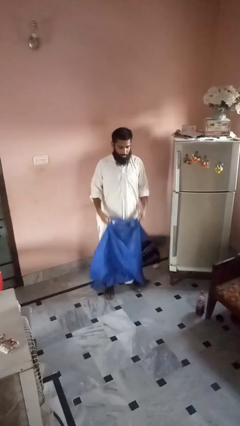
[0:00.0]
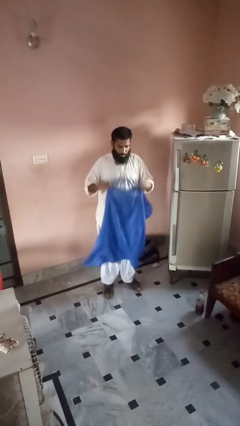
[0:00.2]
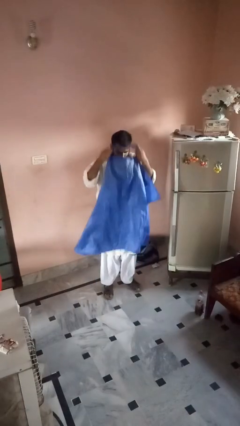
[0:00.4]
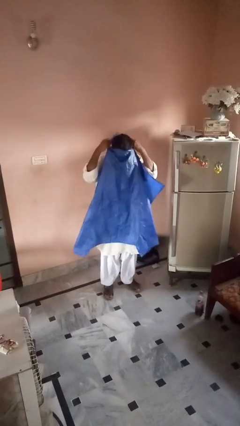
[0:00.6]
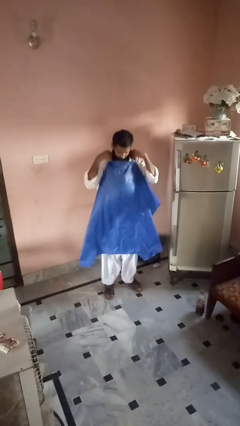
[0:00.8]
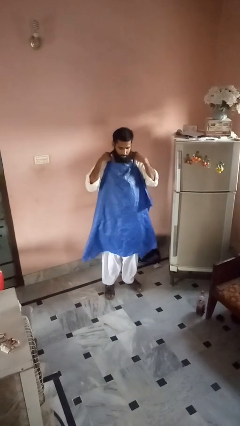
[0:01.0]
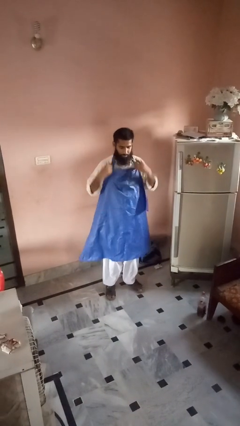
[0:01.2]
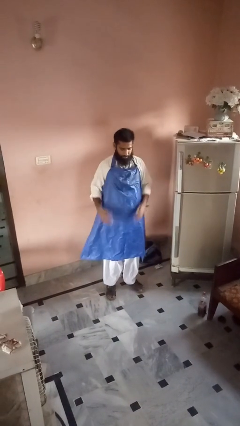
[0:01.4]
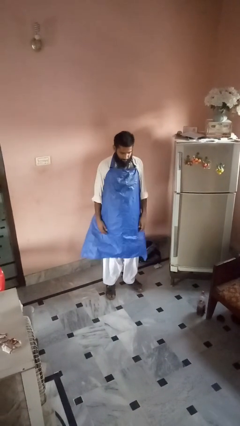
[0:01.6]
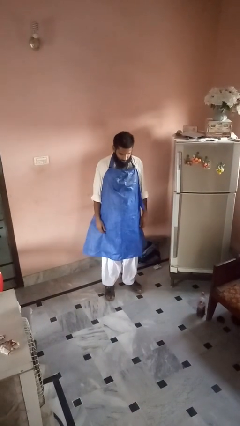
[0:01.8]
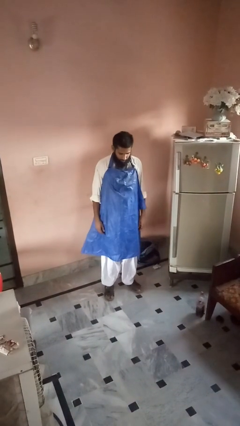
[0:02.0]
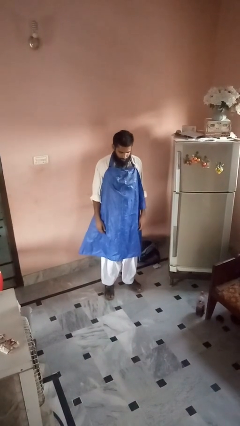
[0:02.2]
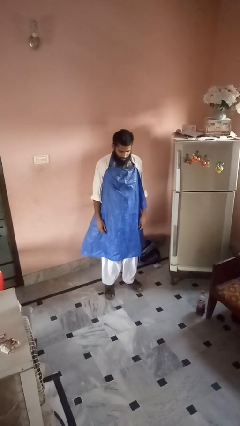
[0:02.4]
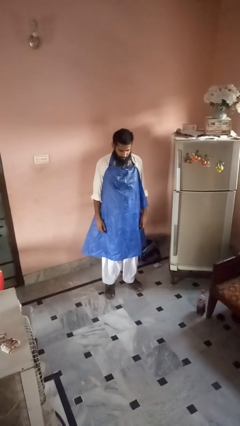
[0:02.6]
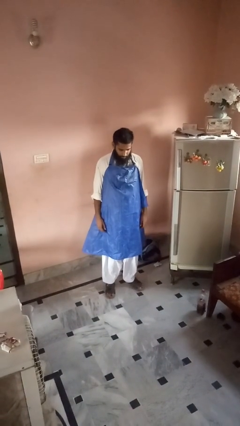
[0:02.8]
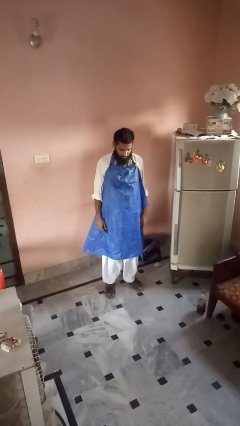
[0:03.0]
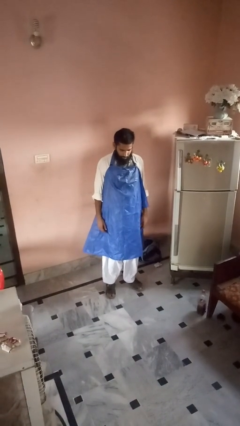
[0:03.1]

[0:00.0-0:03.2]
person puts on apron

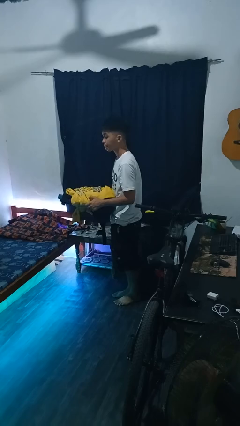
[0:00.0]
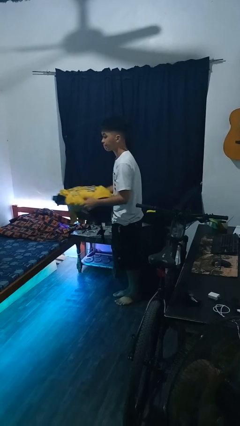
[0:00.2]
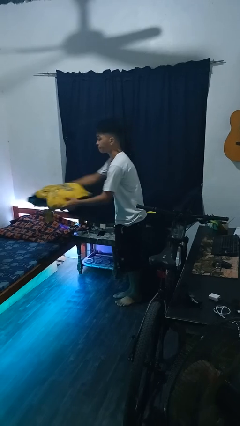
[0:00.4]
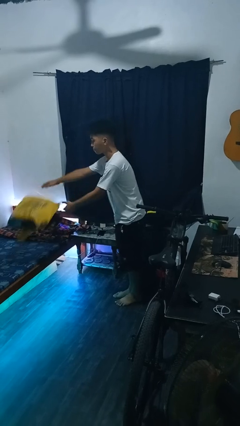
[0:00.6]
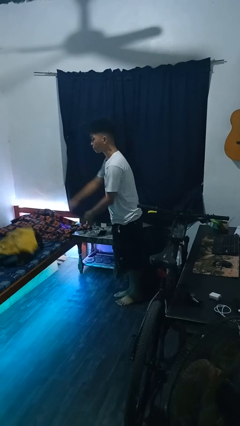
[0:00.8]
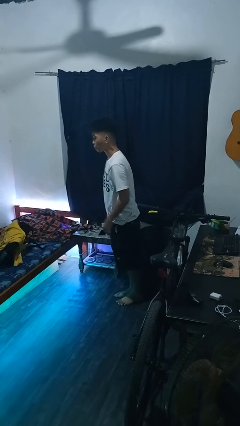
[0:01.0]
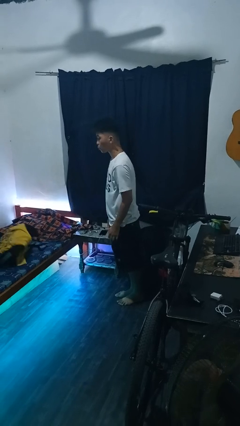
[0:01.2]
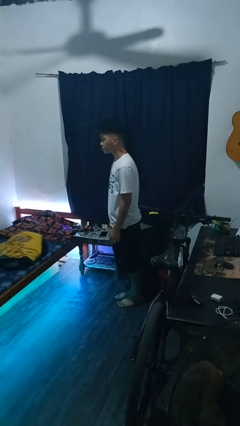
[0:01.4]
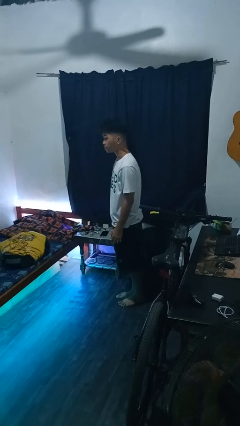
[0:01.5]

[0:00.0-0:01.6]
person throws object on bed

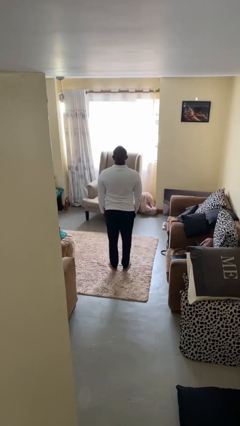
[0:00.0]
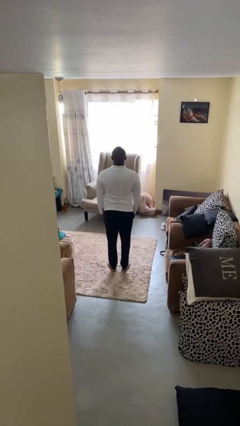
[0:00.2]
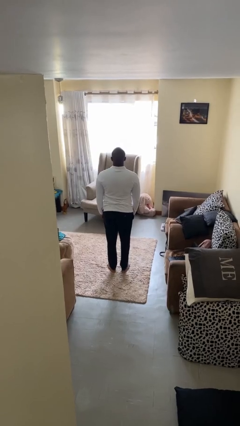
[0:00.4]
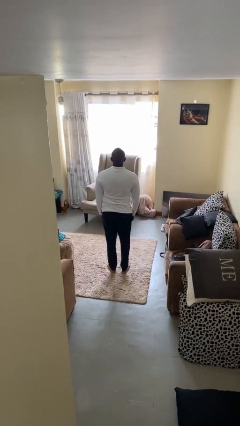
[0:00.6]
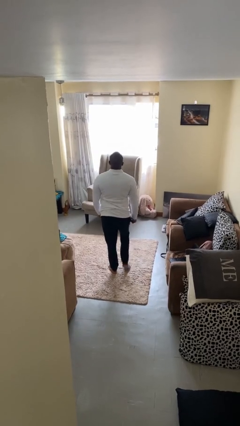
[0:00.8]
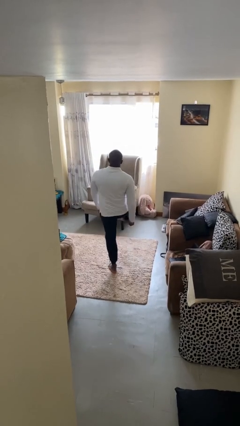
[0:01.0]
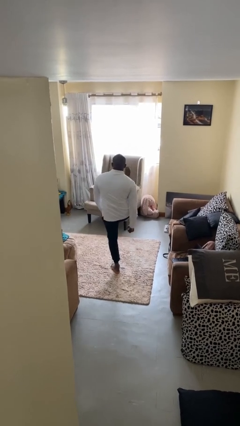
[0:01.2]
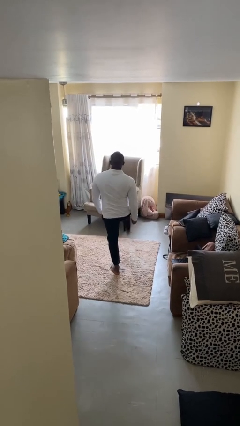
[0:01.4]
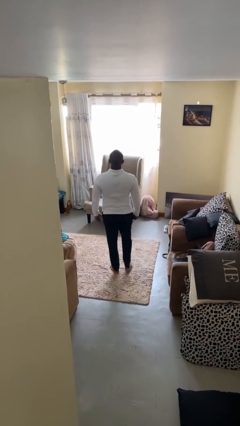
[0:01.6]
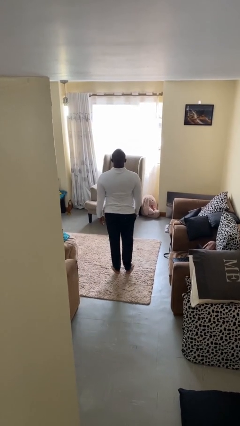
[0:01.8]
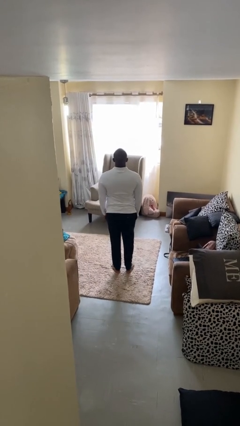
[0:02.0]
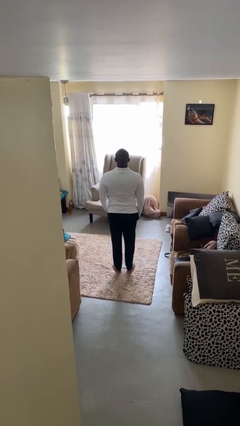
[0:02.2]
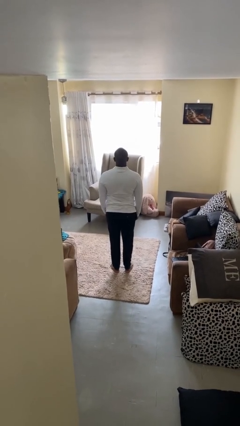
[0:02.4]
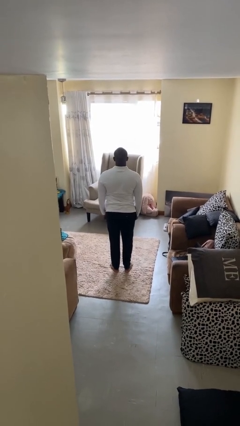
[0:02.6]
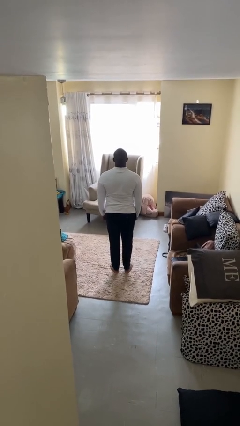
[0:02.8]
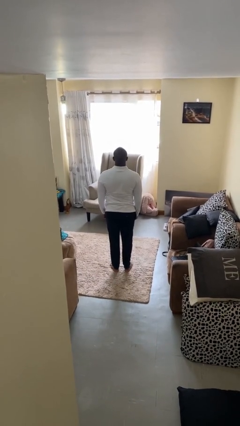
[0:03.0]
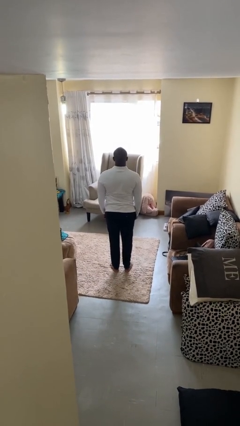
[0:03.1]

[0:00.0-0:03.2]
person karate kicks

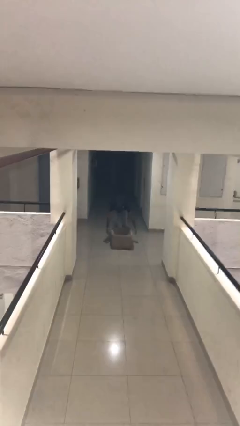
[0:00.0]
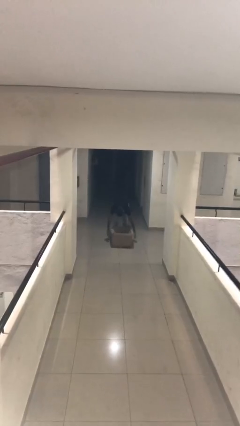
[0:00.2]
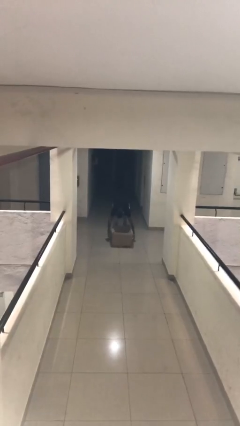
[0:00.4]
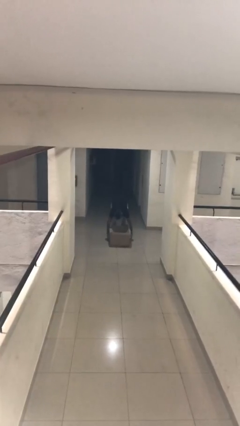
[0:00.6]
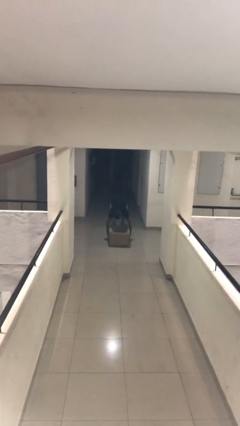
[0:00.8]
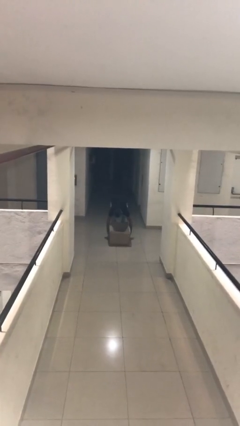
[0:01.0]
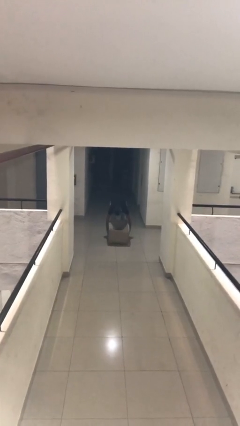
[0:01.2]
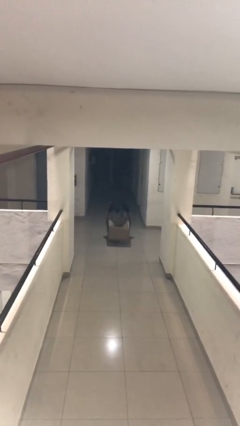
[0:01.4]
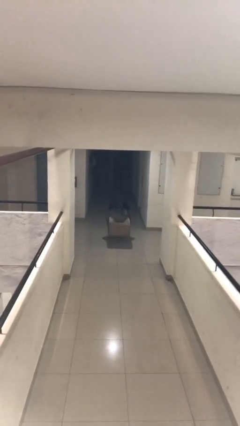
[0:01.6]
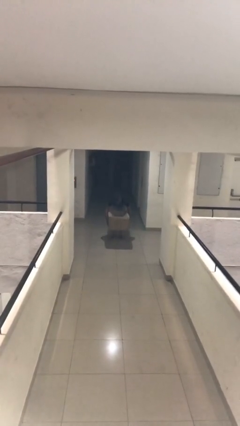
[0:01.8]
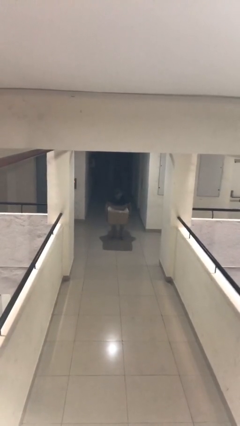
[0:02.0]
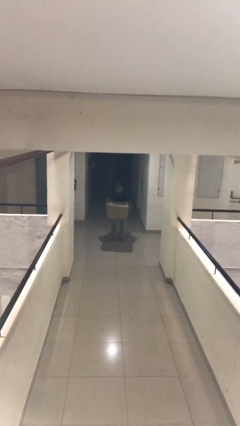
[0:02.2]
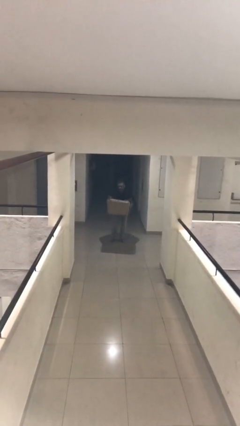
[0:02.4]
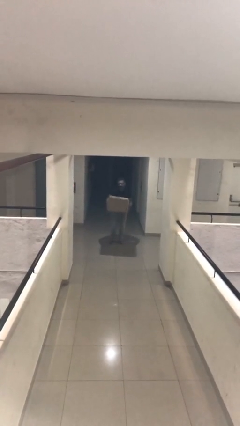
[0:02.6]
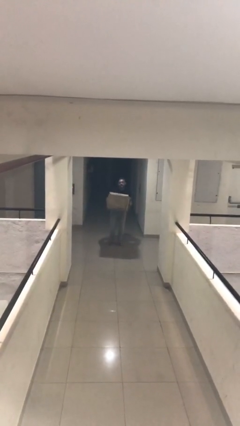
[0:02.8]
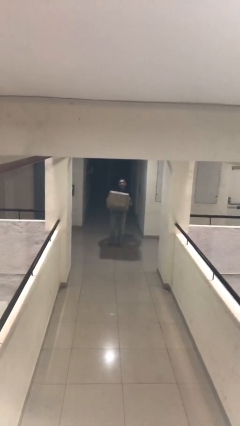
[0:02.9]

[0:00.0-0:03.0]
person picks up object from floor

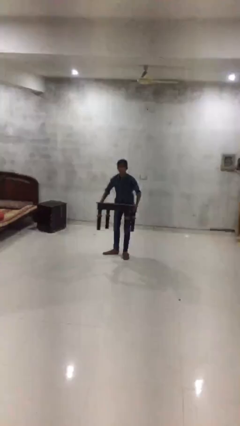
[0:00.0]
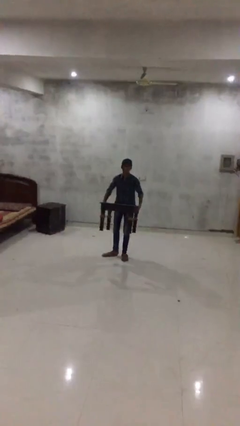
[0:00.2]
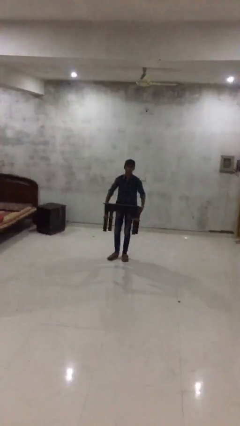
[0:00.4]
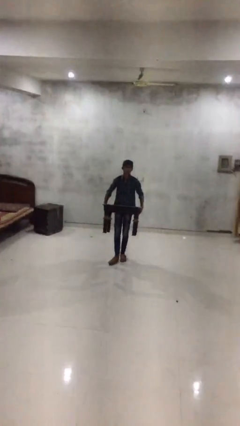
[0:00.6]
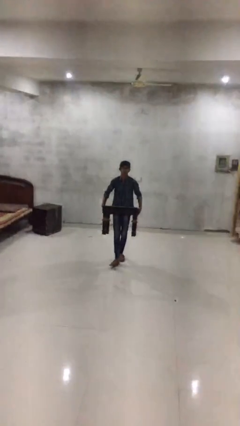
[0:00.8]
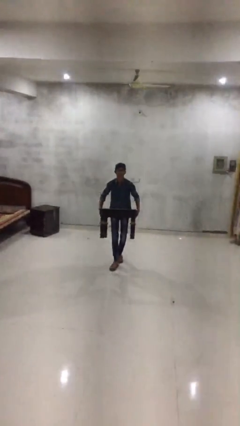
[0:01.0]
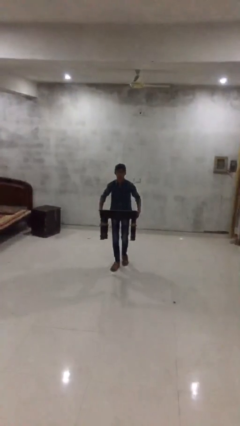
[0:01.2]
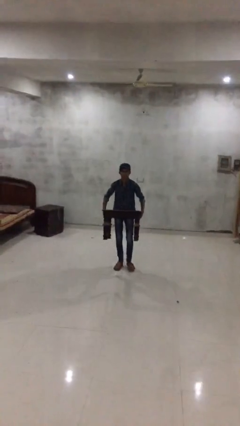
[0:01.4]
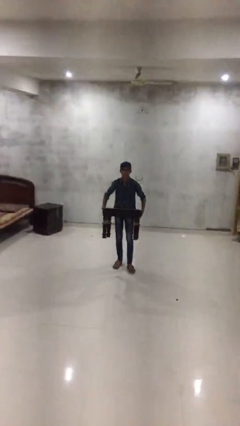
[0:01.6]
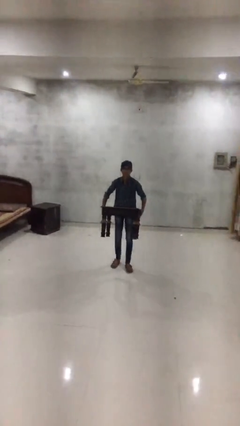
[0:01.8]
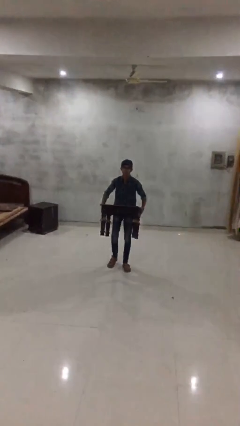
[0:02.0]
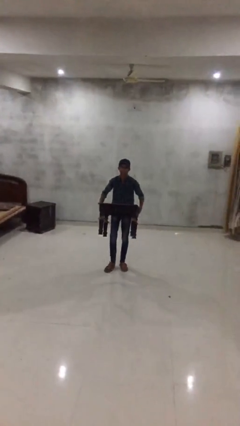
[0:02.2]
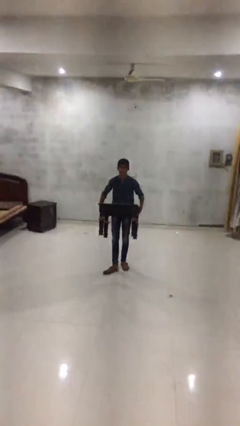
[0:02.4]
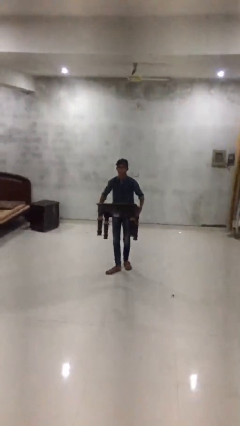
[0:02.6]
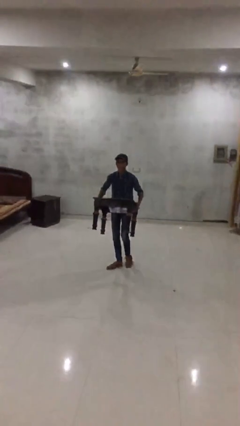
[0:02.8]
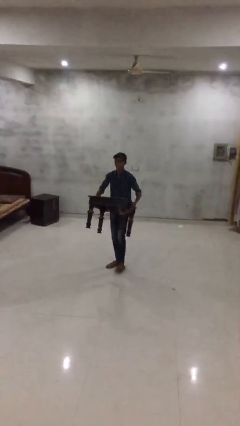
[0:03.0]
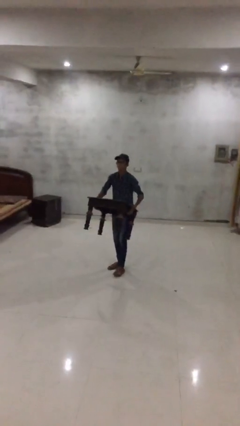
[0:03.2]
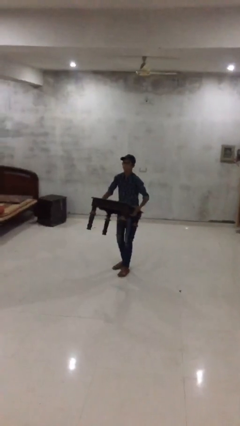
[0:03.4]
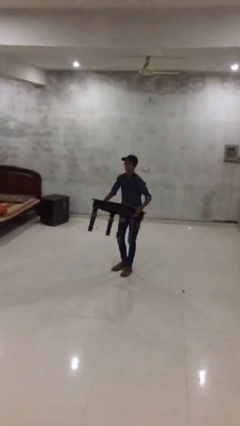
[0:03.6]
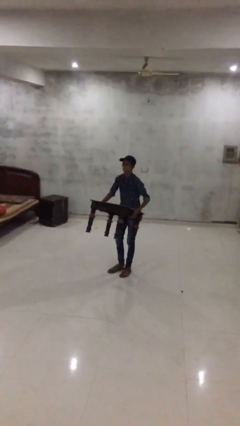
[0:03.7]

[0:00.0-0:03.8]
person carries heavy object

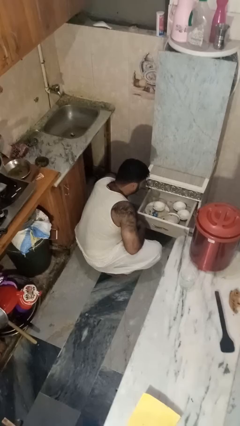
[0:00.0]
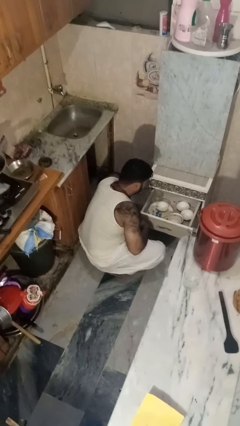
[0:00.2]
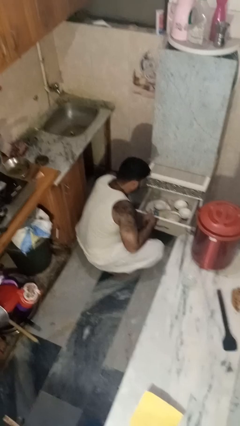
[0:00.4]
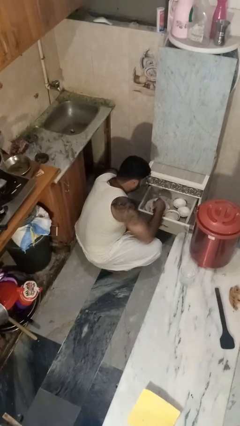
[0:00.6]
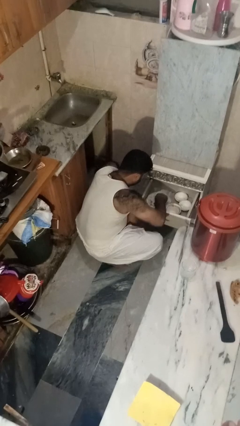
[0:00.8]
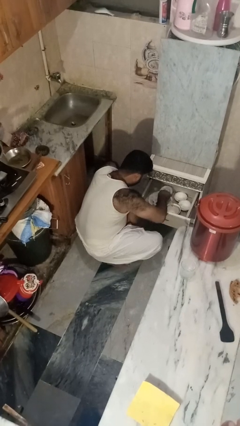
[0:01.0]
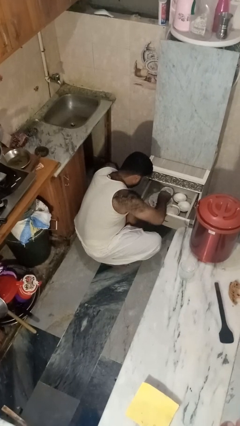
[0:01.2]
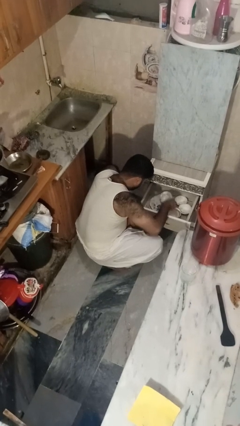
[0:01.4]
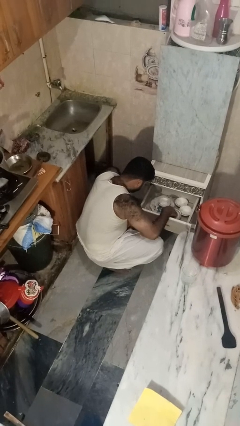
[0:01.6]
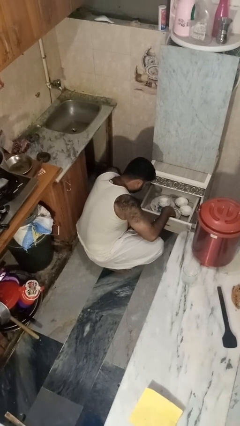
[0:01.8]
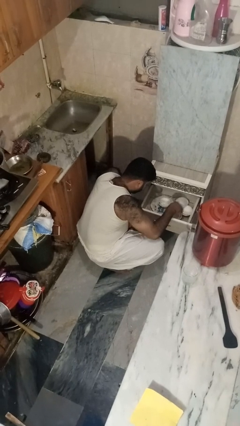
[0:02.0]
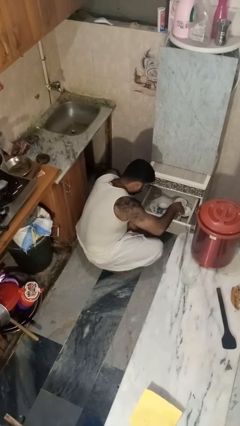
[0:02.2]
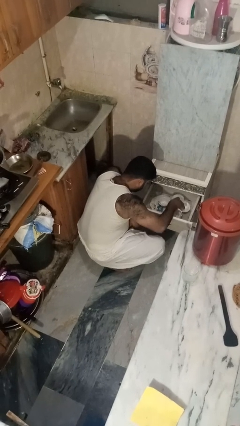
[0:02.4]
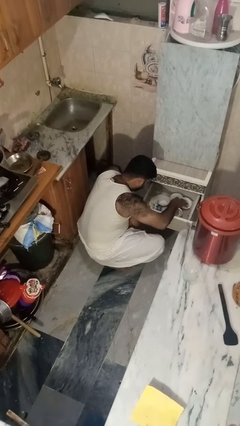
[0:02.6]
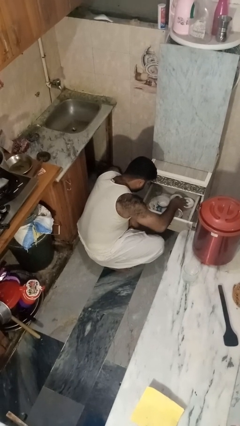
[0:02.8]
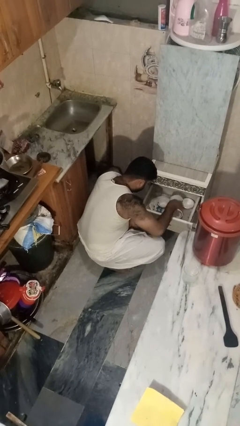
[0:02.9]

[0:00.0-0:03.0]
person searches in kitchen drawer
